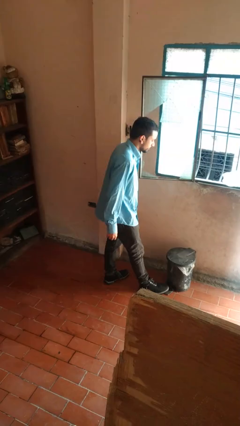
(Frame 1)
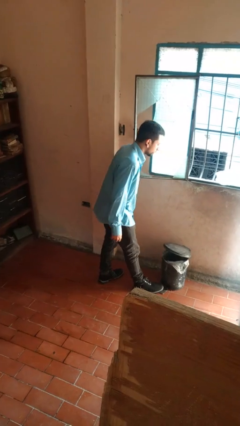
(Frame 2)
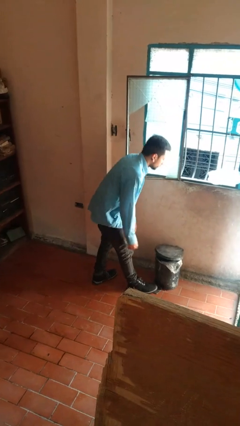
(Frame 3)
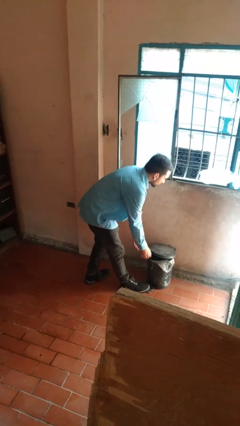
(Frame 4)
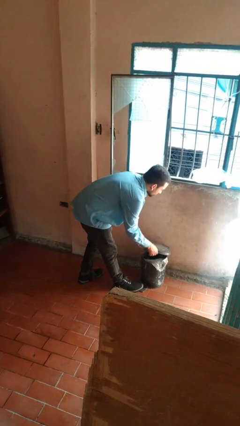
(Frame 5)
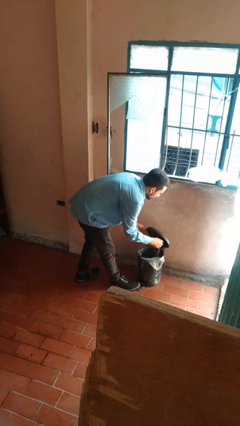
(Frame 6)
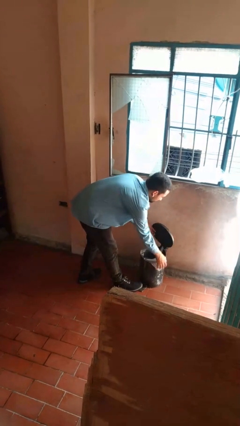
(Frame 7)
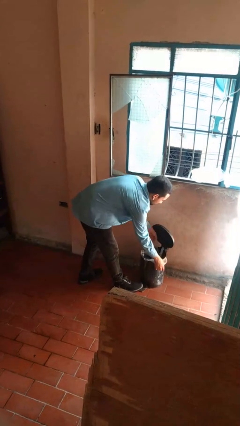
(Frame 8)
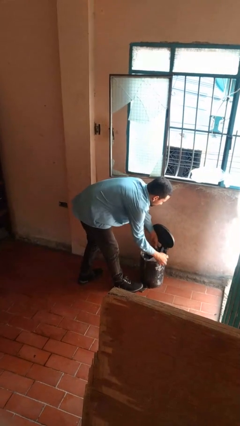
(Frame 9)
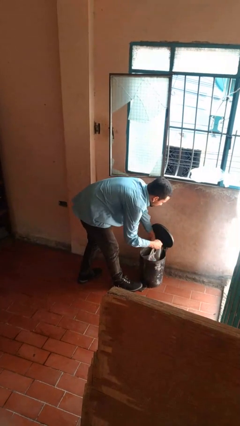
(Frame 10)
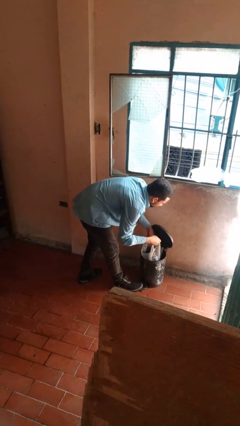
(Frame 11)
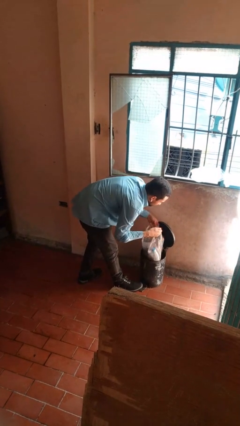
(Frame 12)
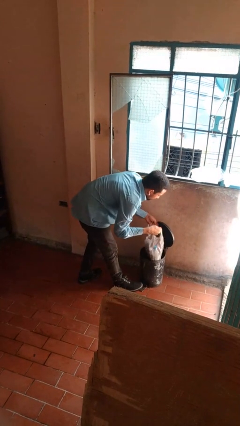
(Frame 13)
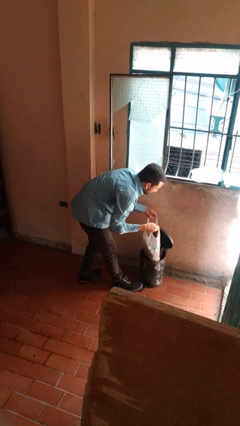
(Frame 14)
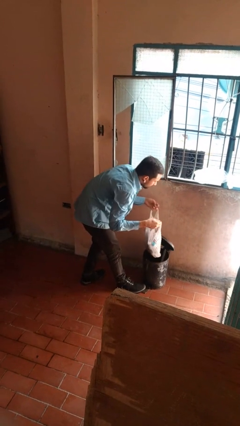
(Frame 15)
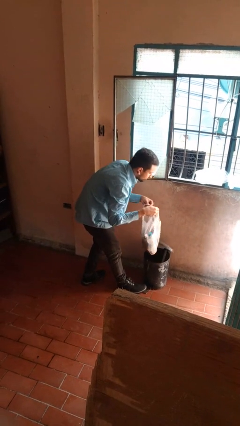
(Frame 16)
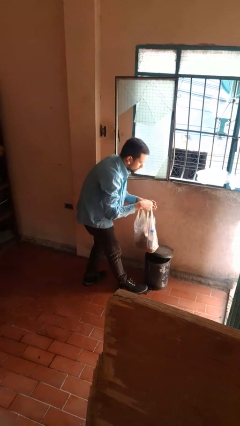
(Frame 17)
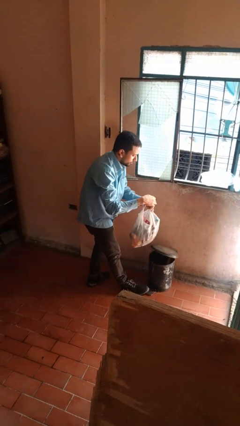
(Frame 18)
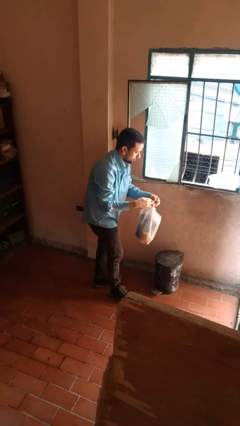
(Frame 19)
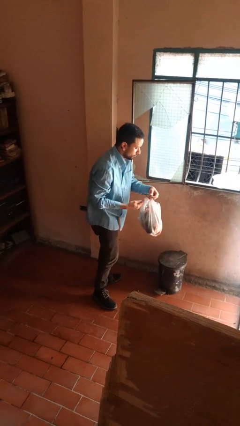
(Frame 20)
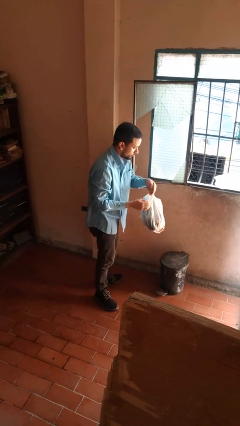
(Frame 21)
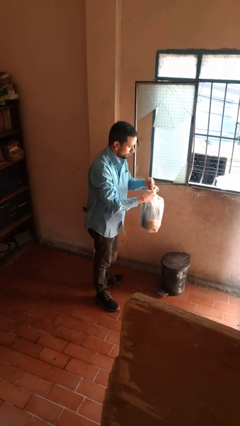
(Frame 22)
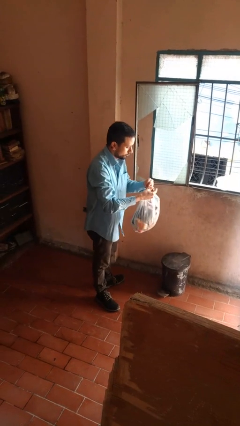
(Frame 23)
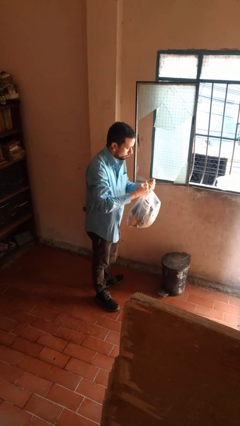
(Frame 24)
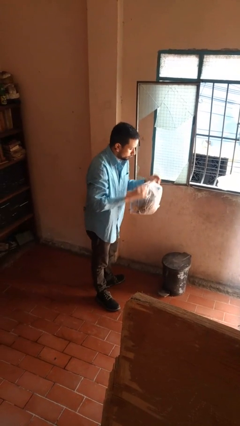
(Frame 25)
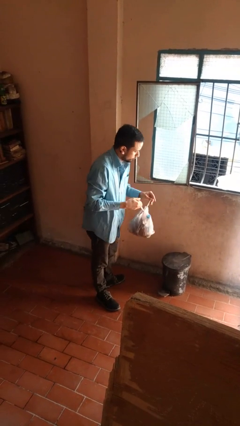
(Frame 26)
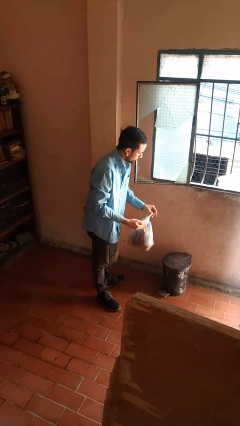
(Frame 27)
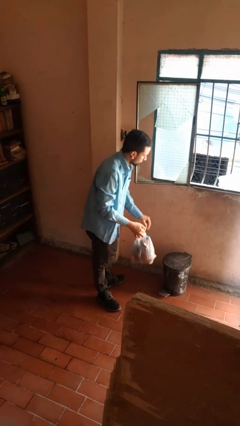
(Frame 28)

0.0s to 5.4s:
person removes trashbag from trashcan

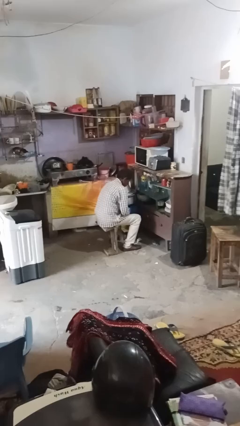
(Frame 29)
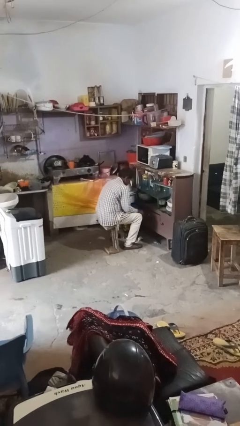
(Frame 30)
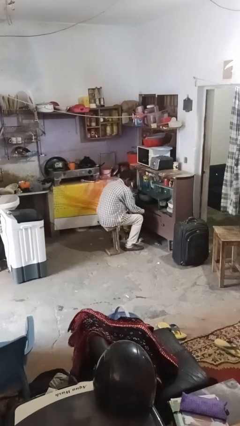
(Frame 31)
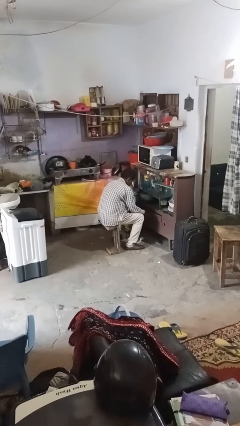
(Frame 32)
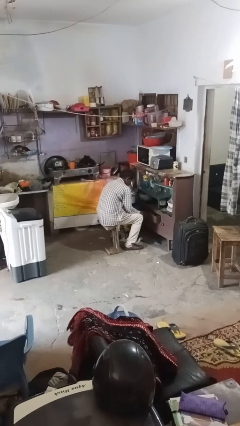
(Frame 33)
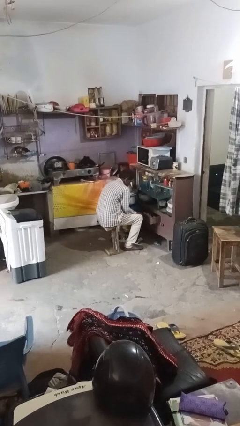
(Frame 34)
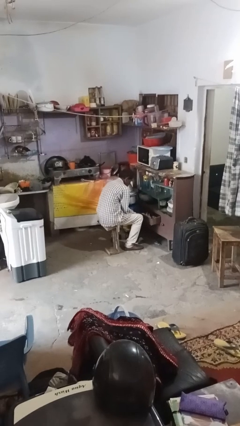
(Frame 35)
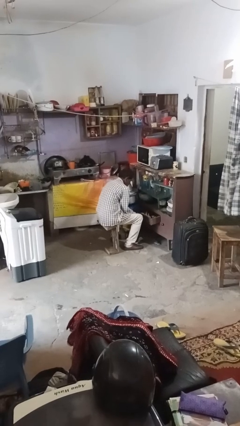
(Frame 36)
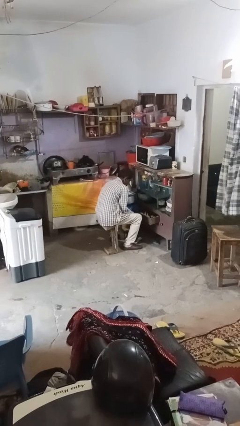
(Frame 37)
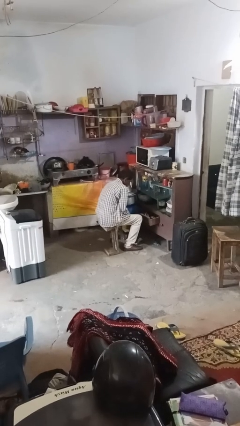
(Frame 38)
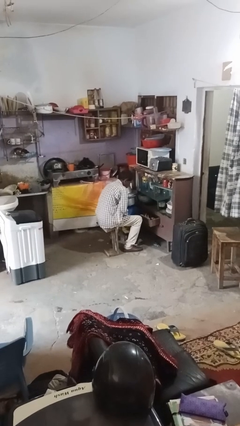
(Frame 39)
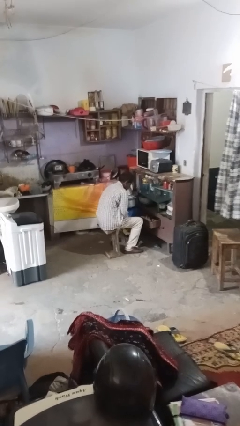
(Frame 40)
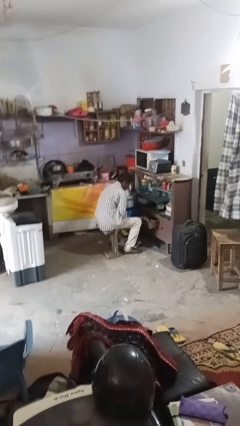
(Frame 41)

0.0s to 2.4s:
person opens kitchen drawer

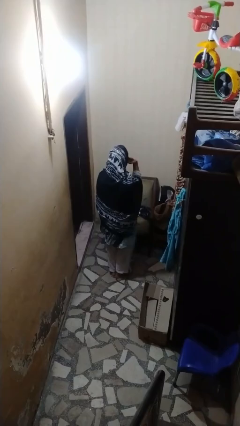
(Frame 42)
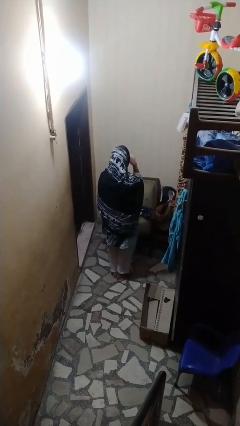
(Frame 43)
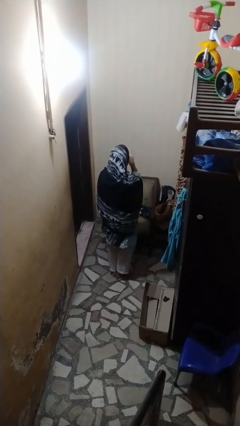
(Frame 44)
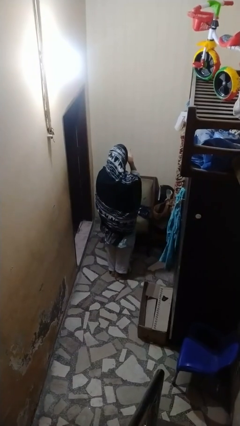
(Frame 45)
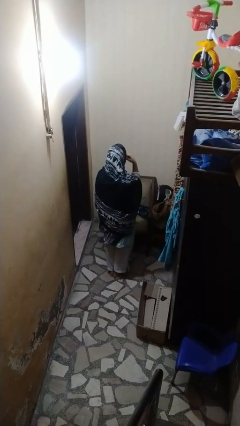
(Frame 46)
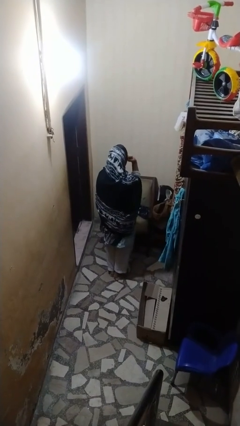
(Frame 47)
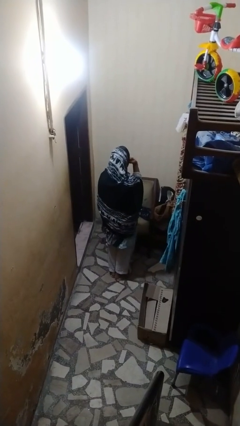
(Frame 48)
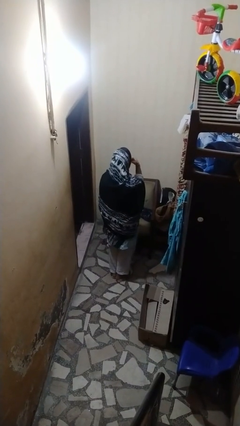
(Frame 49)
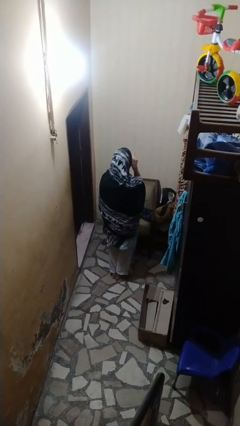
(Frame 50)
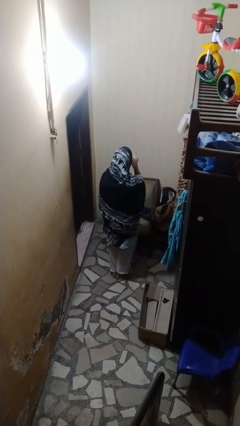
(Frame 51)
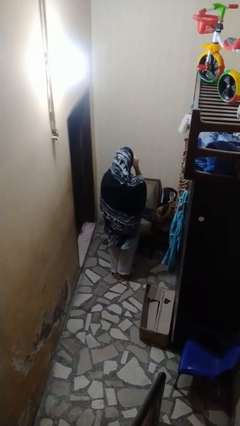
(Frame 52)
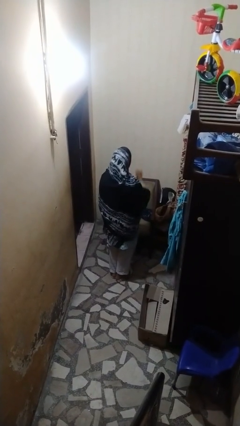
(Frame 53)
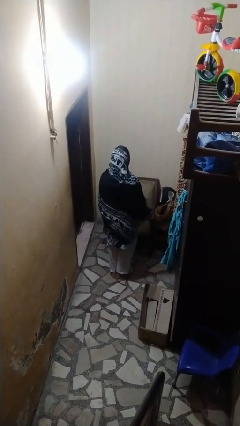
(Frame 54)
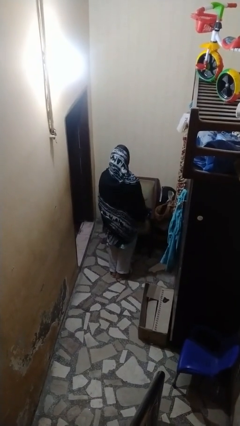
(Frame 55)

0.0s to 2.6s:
person gestures watch closely

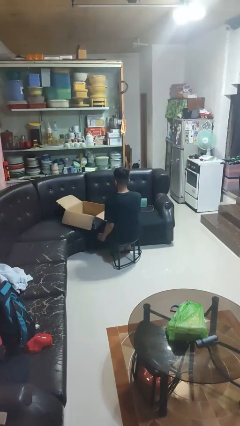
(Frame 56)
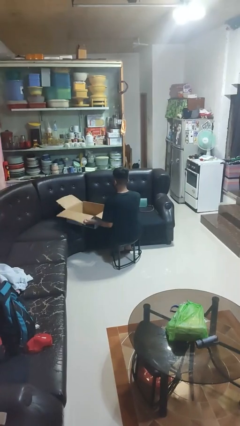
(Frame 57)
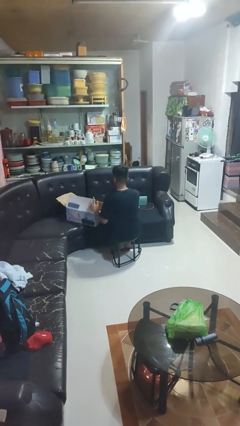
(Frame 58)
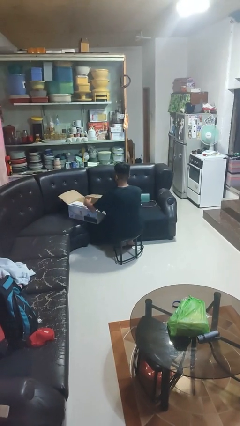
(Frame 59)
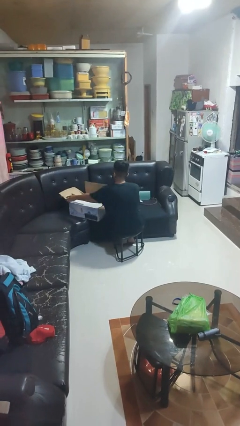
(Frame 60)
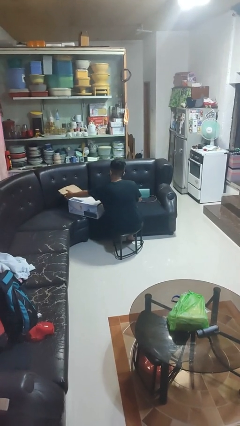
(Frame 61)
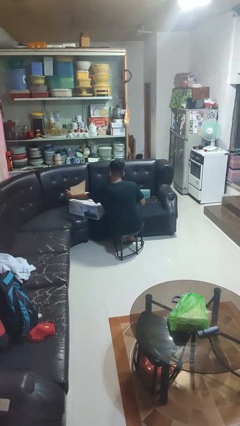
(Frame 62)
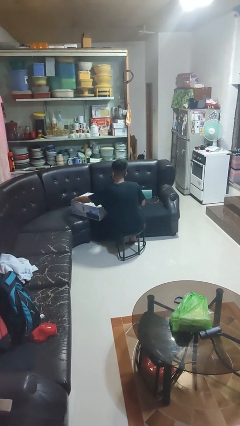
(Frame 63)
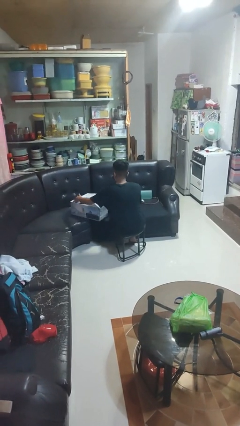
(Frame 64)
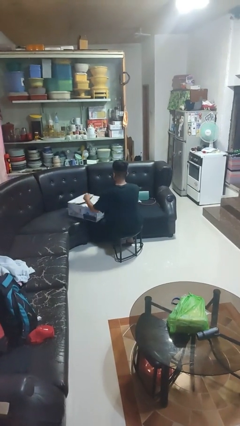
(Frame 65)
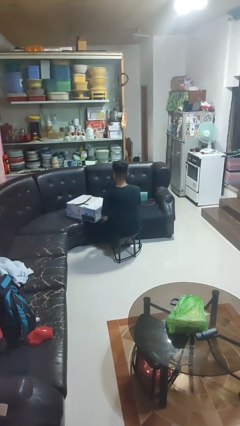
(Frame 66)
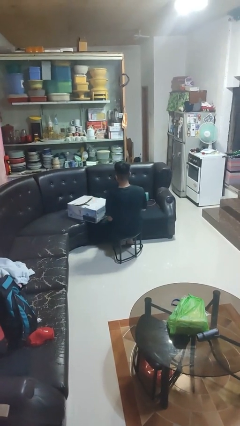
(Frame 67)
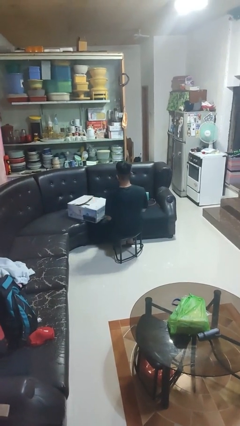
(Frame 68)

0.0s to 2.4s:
person closes box

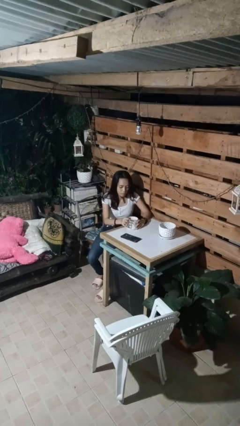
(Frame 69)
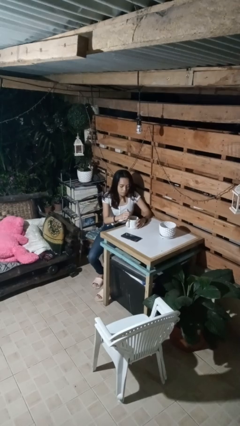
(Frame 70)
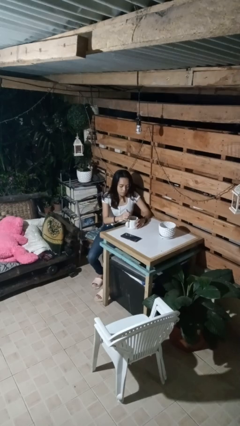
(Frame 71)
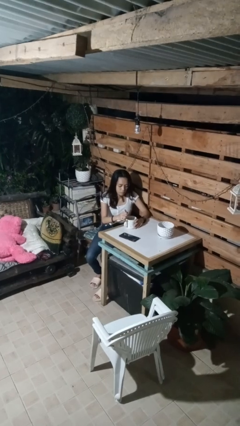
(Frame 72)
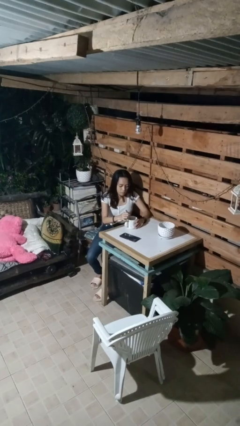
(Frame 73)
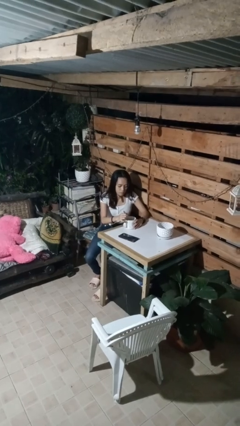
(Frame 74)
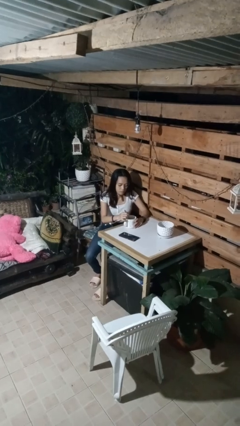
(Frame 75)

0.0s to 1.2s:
person stirs mug

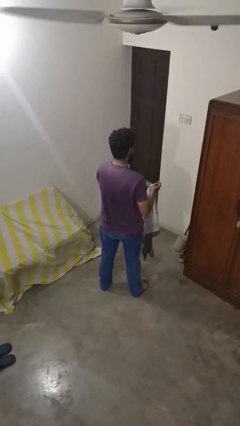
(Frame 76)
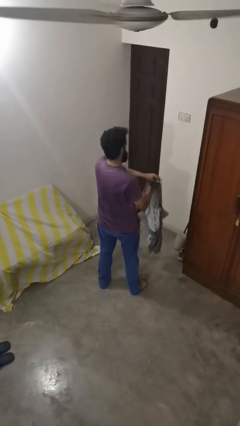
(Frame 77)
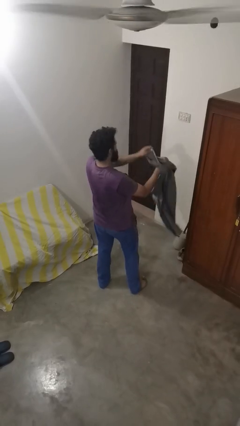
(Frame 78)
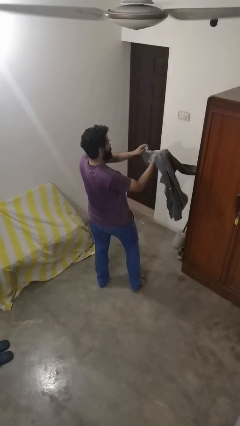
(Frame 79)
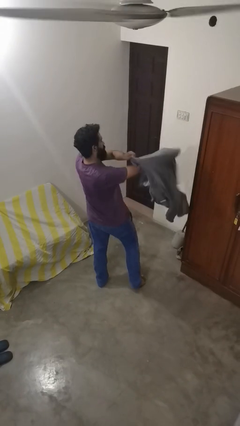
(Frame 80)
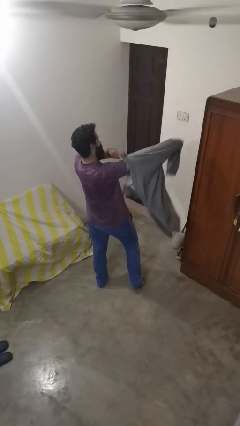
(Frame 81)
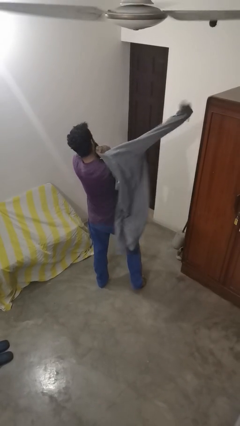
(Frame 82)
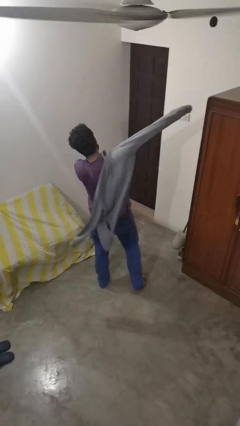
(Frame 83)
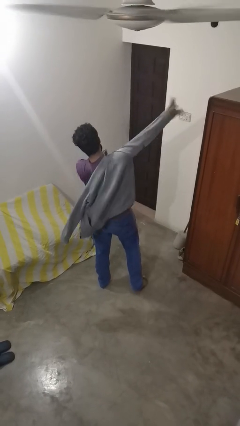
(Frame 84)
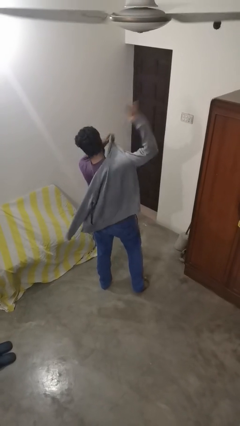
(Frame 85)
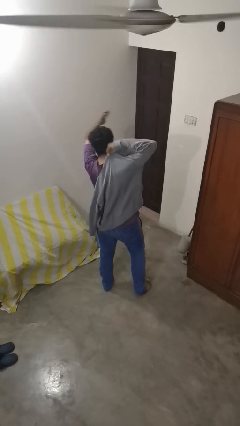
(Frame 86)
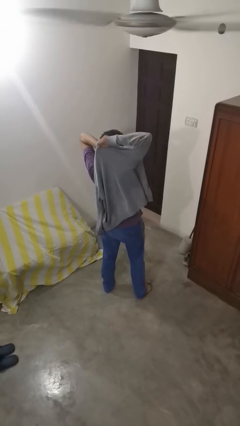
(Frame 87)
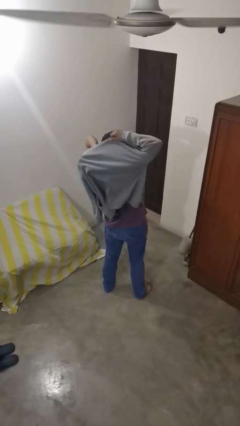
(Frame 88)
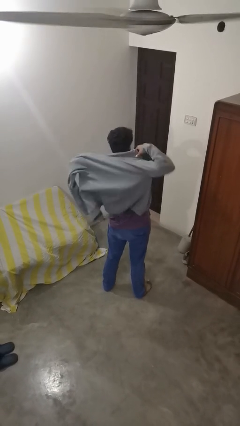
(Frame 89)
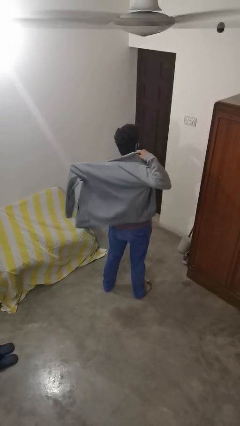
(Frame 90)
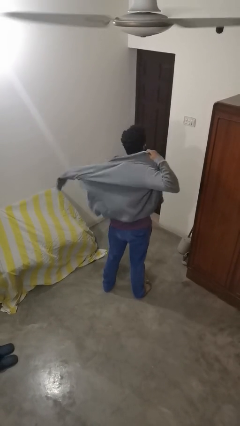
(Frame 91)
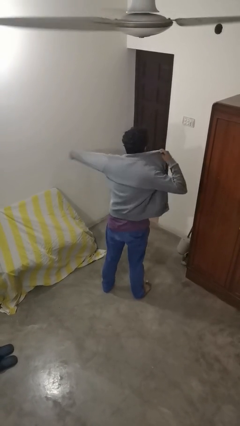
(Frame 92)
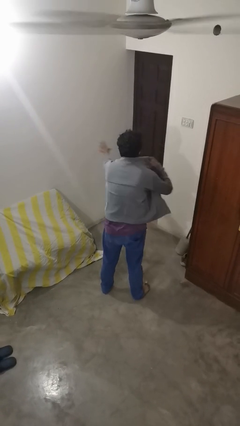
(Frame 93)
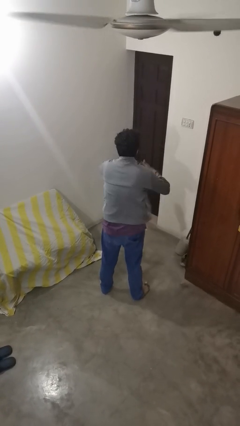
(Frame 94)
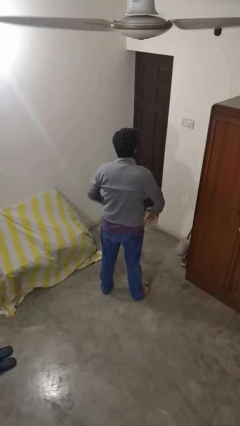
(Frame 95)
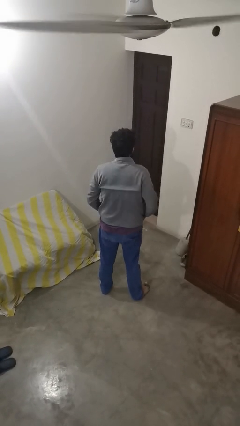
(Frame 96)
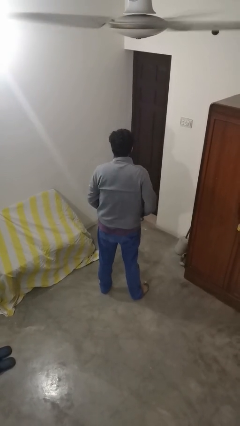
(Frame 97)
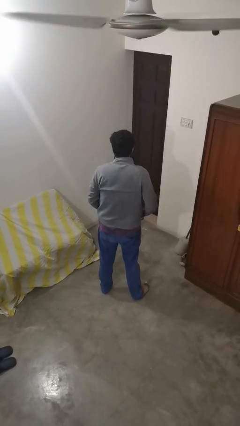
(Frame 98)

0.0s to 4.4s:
person puts on jacket
